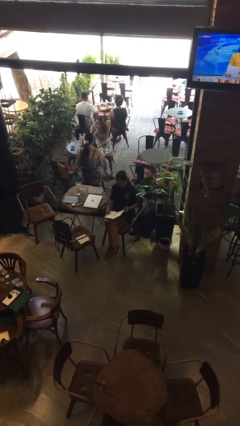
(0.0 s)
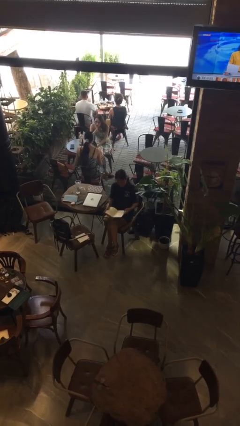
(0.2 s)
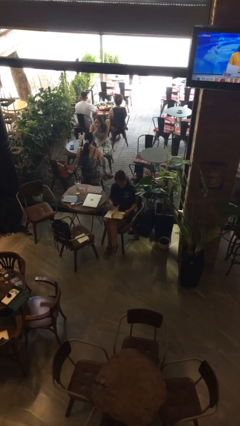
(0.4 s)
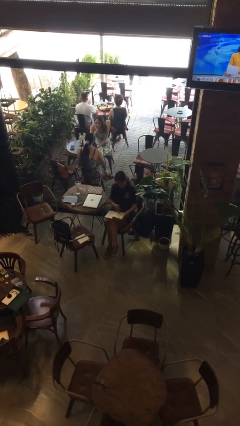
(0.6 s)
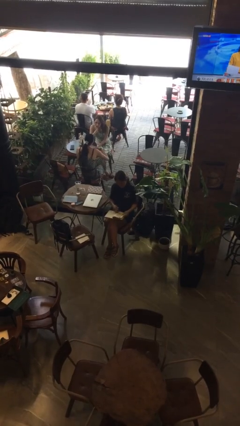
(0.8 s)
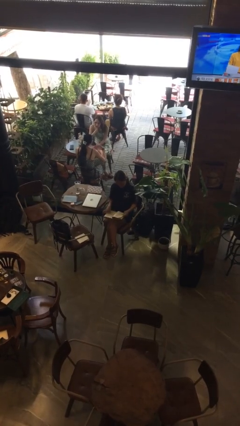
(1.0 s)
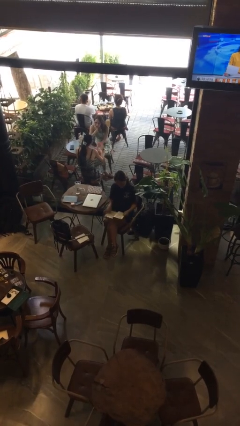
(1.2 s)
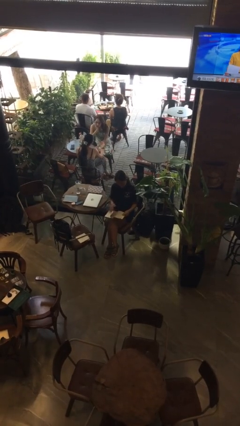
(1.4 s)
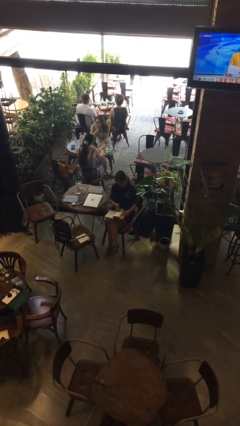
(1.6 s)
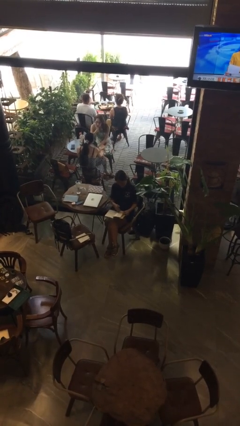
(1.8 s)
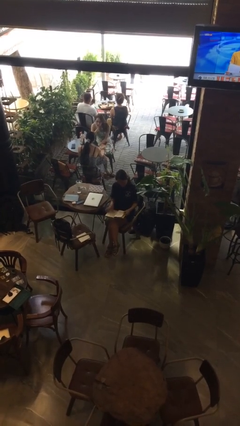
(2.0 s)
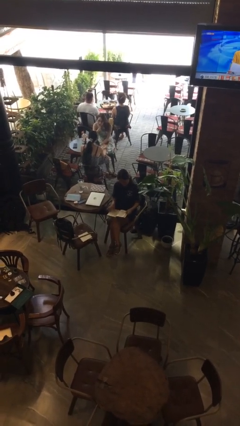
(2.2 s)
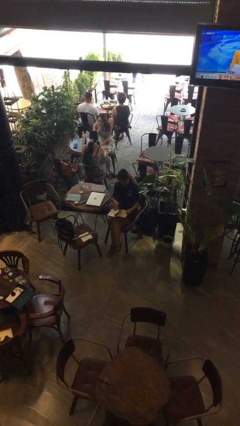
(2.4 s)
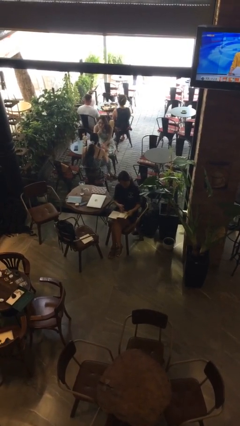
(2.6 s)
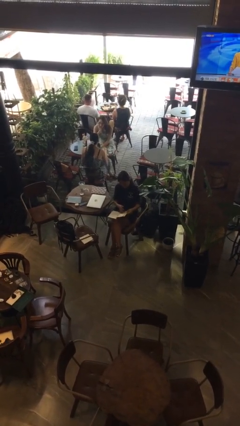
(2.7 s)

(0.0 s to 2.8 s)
person reads book

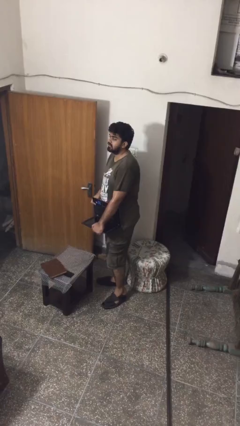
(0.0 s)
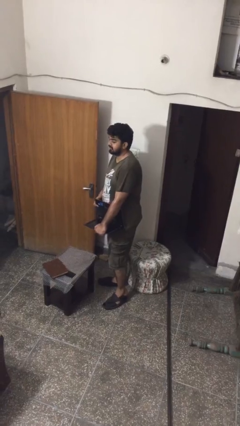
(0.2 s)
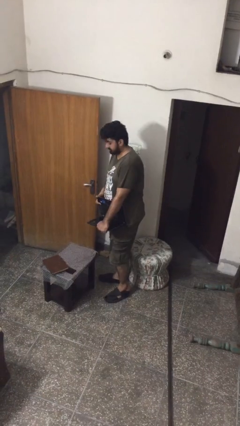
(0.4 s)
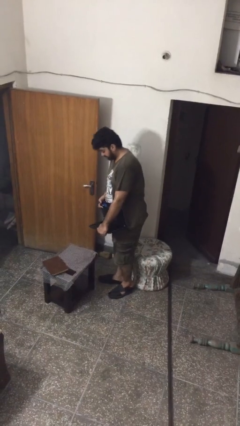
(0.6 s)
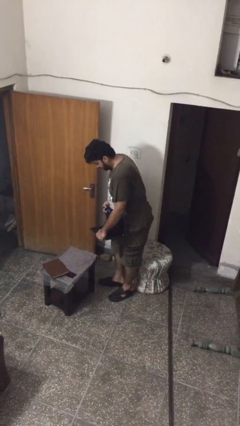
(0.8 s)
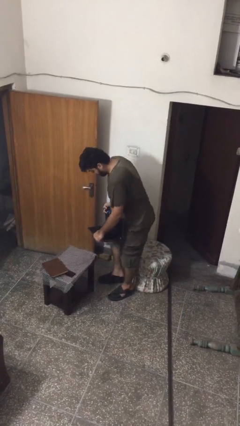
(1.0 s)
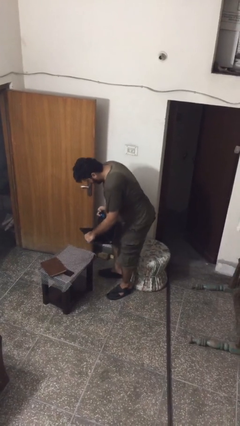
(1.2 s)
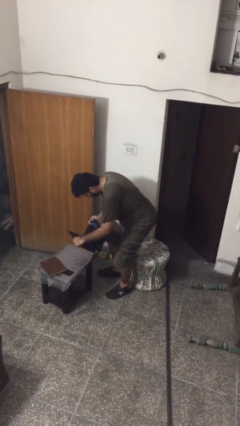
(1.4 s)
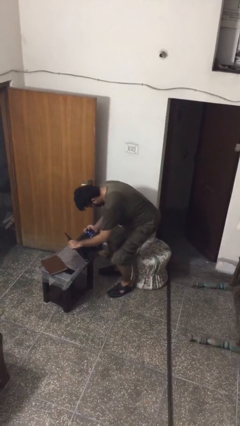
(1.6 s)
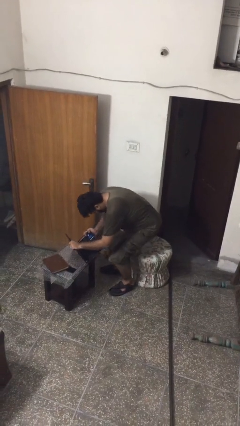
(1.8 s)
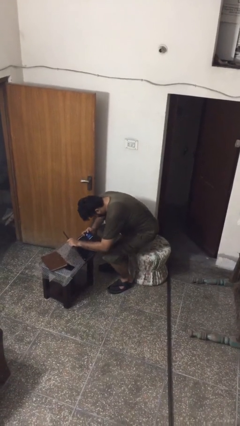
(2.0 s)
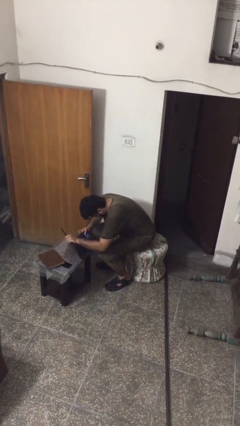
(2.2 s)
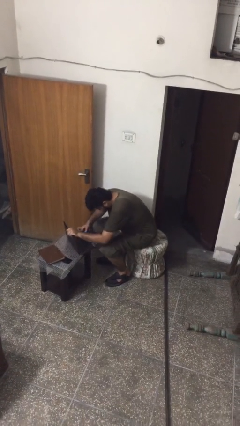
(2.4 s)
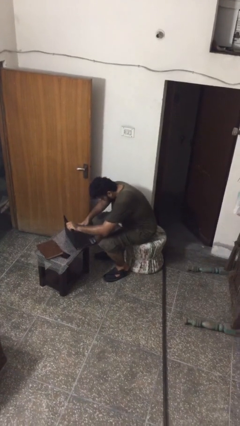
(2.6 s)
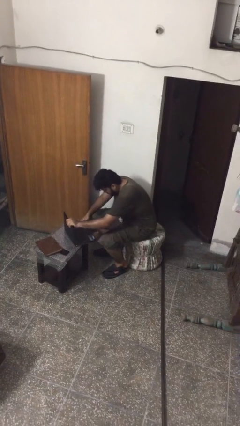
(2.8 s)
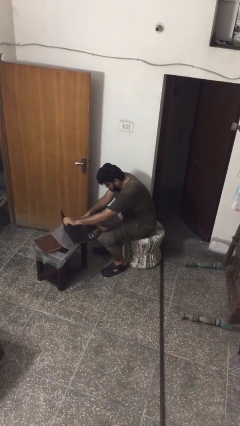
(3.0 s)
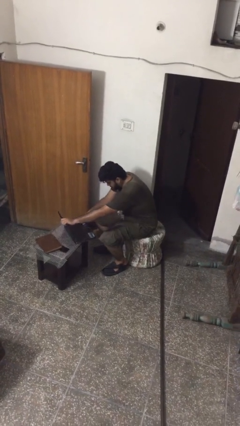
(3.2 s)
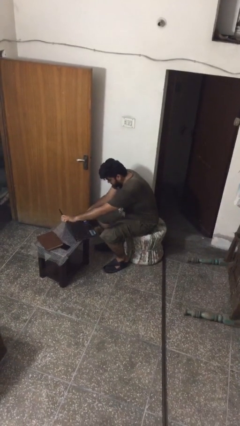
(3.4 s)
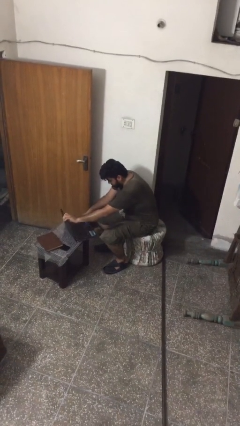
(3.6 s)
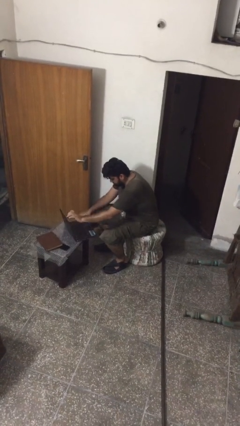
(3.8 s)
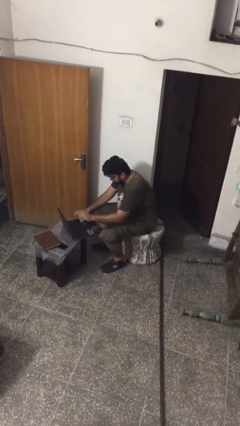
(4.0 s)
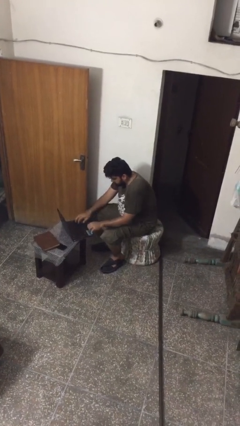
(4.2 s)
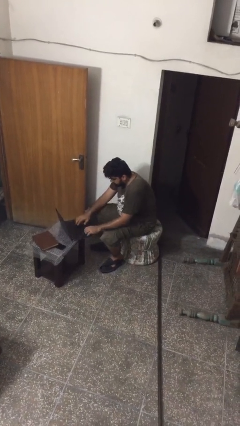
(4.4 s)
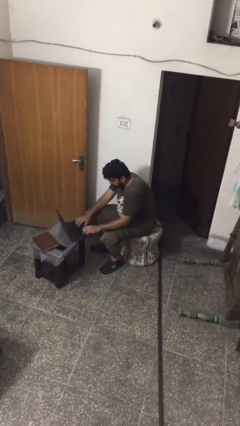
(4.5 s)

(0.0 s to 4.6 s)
person sits down

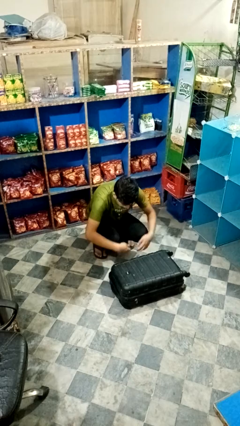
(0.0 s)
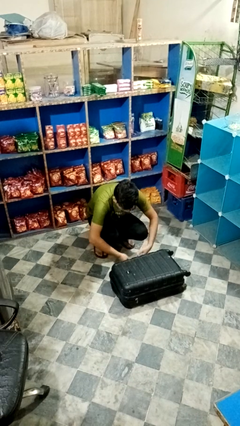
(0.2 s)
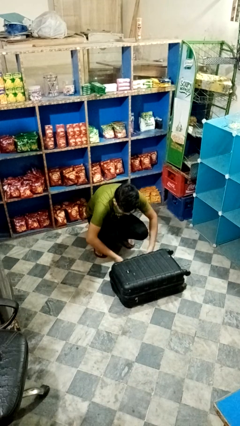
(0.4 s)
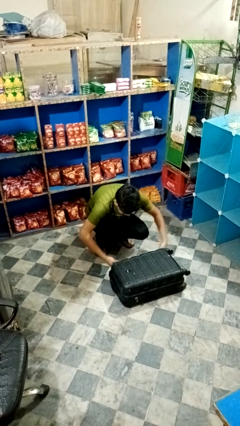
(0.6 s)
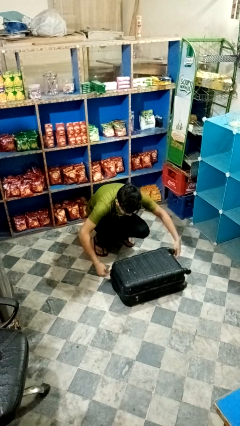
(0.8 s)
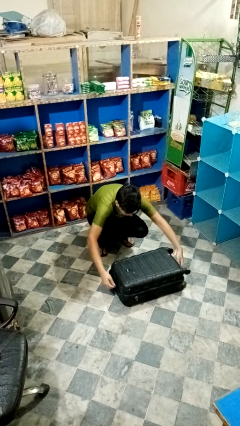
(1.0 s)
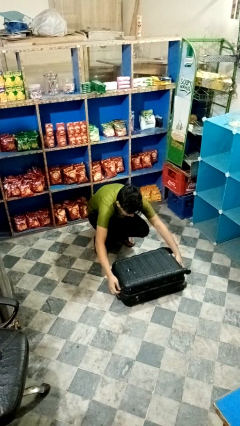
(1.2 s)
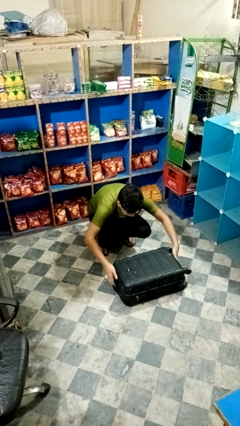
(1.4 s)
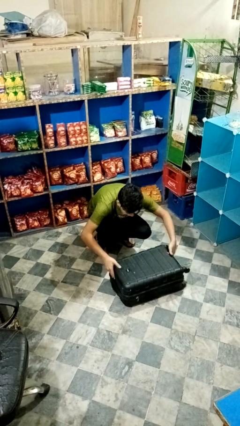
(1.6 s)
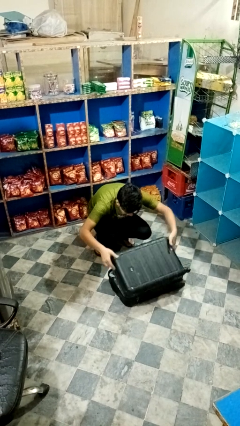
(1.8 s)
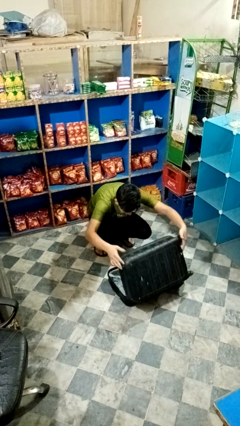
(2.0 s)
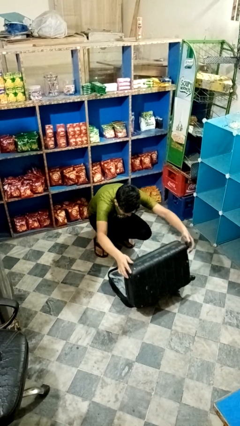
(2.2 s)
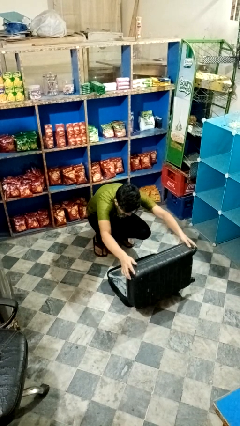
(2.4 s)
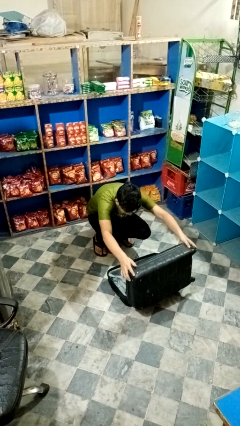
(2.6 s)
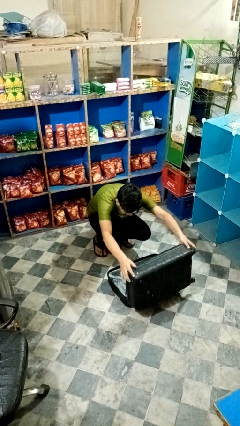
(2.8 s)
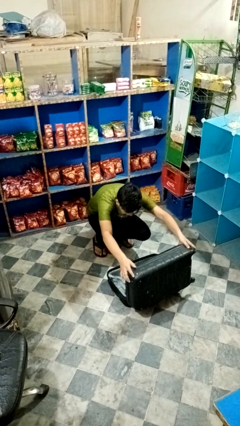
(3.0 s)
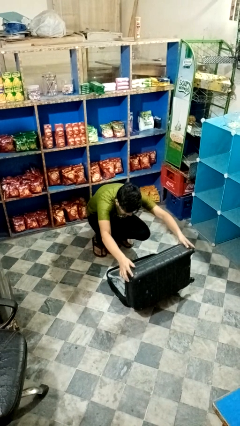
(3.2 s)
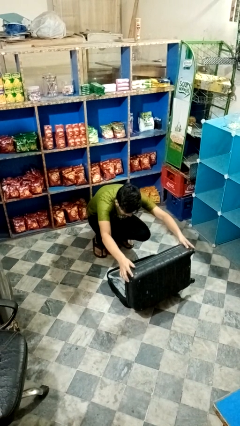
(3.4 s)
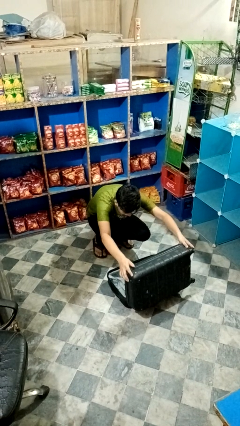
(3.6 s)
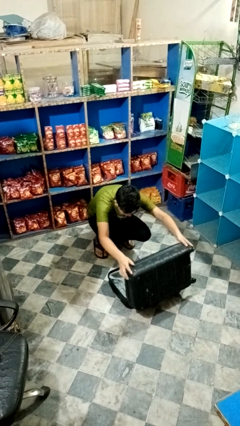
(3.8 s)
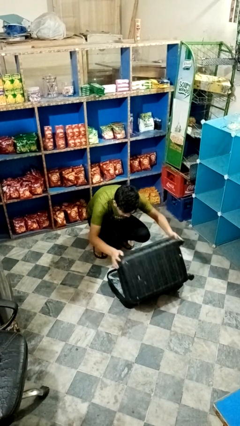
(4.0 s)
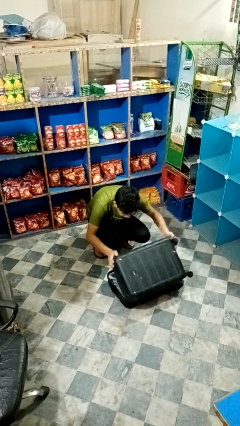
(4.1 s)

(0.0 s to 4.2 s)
person opens suitcase

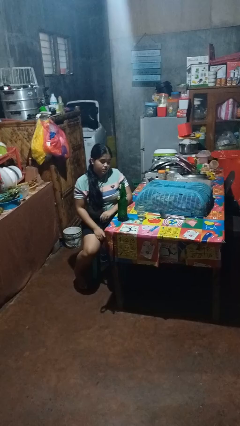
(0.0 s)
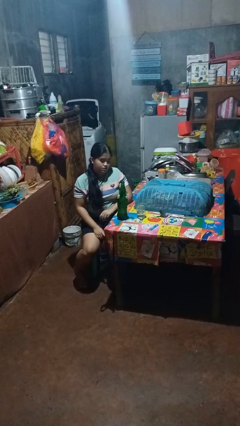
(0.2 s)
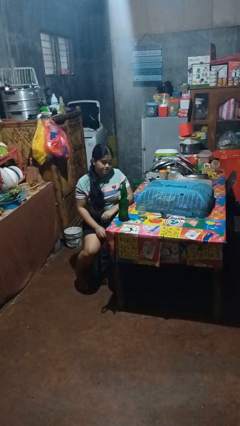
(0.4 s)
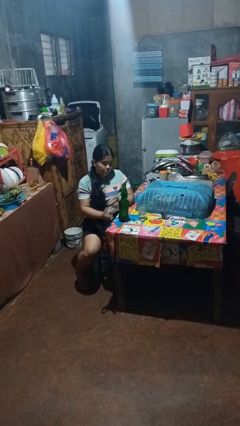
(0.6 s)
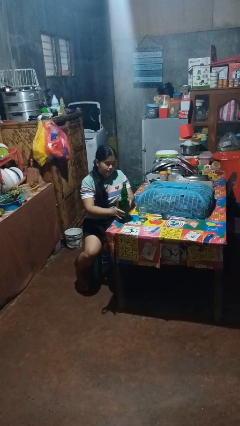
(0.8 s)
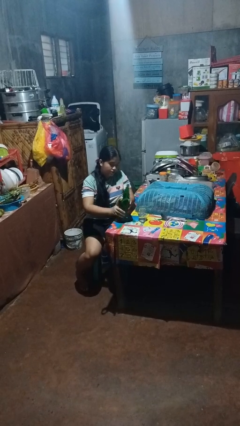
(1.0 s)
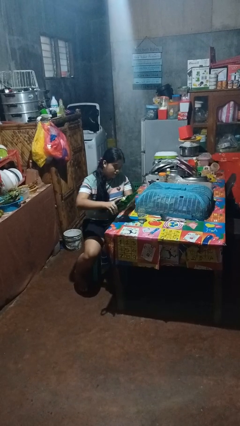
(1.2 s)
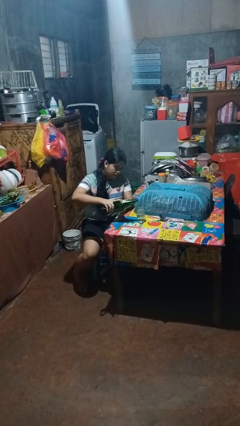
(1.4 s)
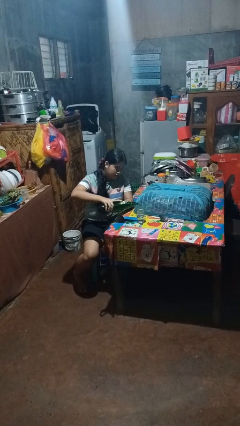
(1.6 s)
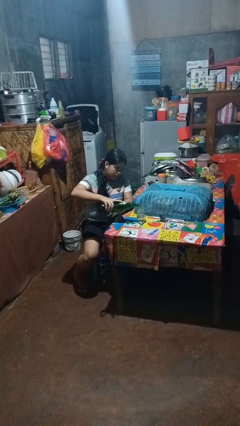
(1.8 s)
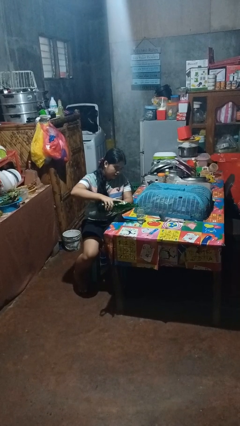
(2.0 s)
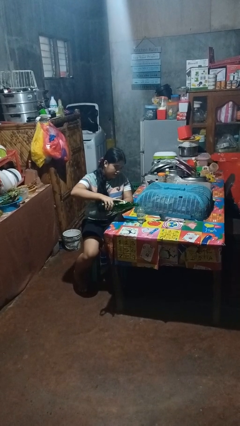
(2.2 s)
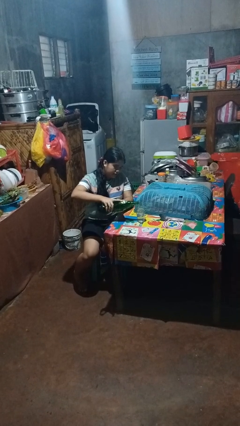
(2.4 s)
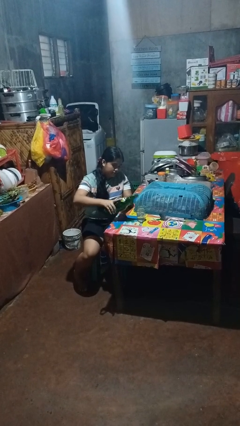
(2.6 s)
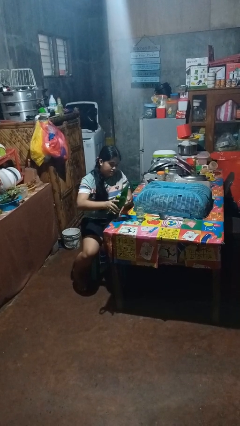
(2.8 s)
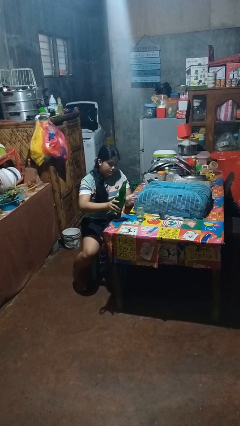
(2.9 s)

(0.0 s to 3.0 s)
person pours liquid into cup

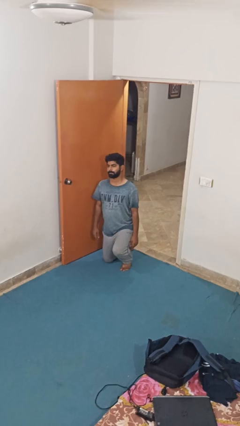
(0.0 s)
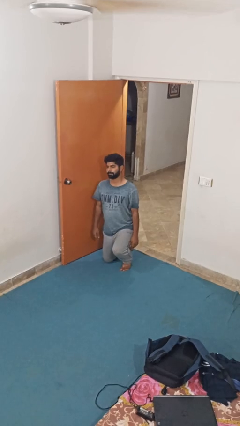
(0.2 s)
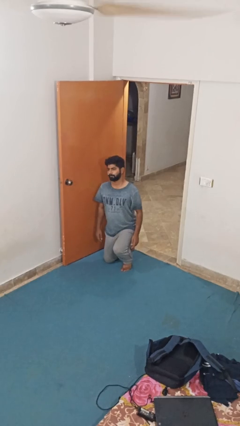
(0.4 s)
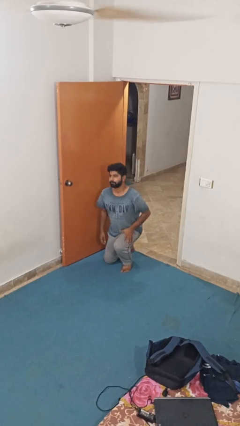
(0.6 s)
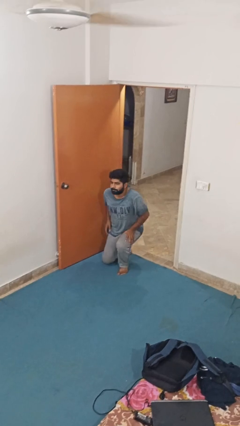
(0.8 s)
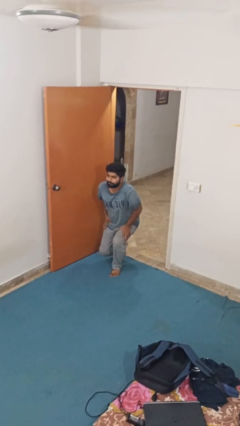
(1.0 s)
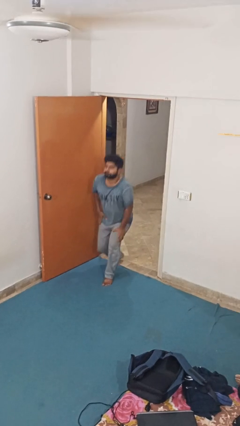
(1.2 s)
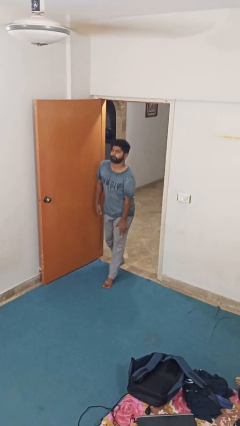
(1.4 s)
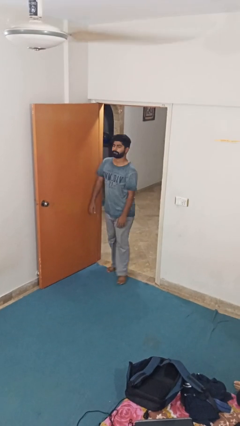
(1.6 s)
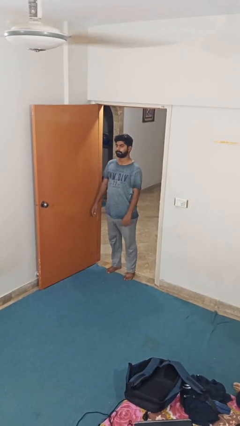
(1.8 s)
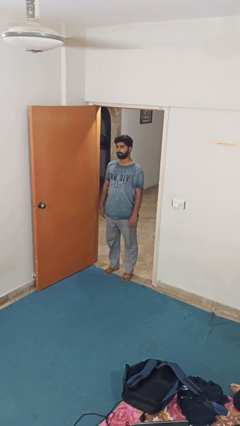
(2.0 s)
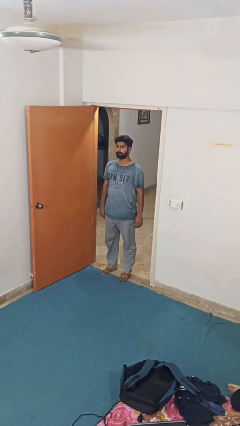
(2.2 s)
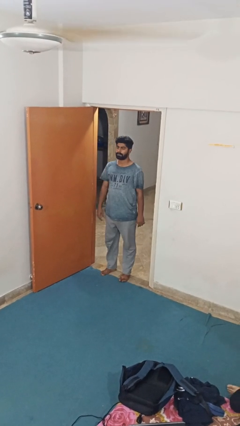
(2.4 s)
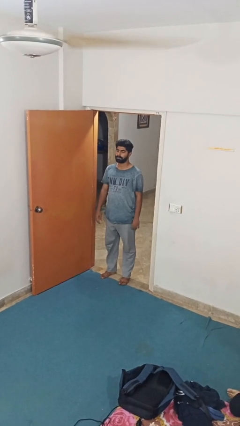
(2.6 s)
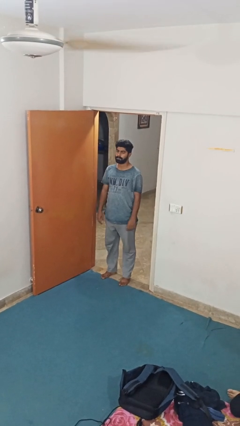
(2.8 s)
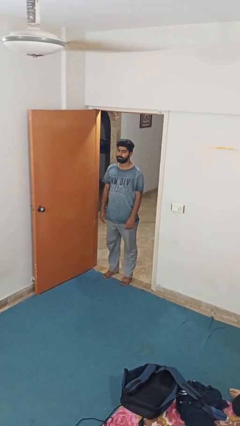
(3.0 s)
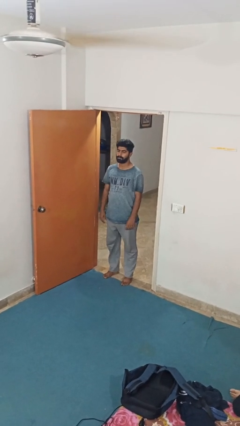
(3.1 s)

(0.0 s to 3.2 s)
person stands up from floor
